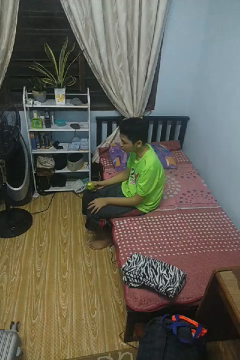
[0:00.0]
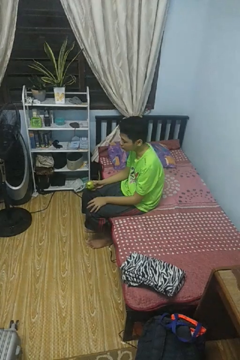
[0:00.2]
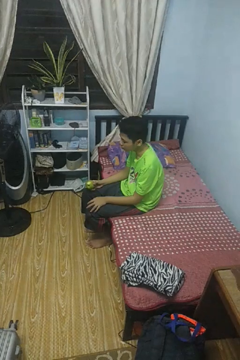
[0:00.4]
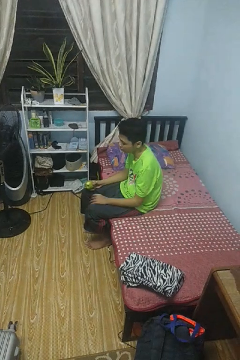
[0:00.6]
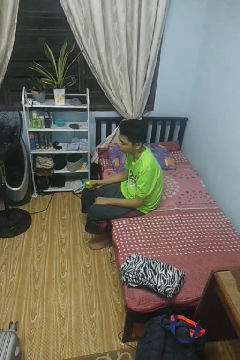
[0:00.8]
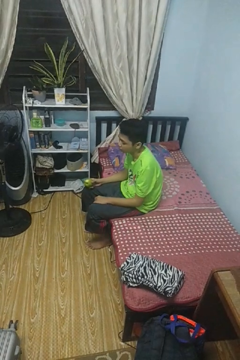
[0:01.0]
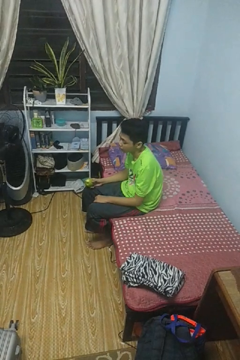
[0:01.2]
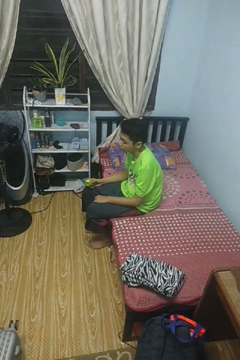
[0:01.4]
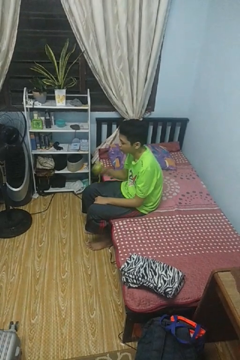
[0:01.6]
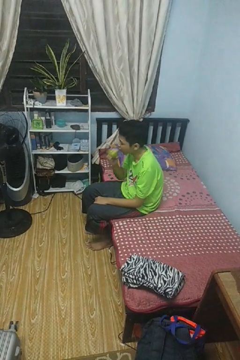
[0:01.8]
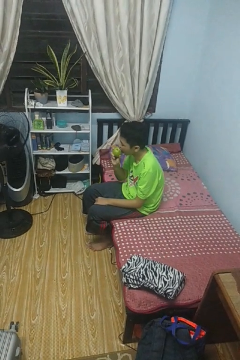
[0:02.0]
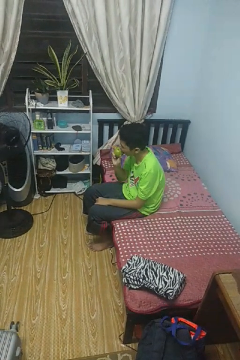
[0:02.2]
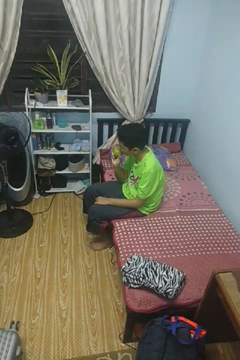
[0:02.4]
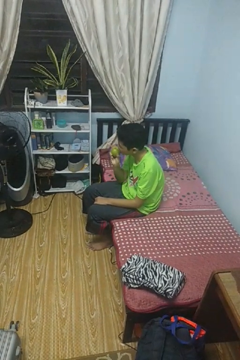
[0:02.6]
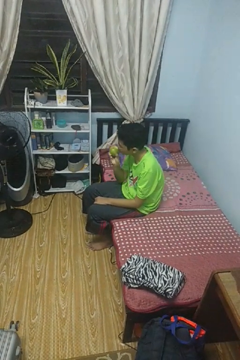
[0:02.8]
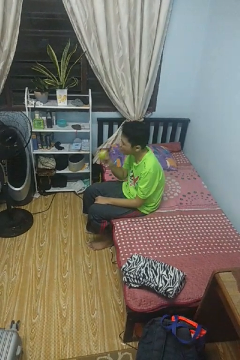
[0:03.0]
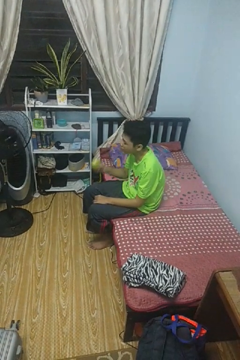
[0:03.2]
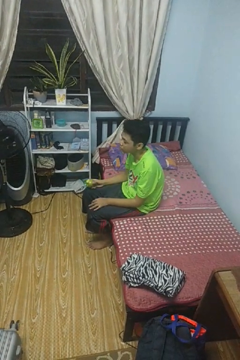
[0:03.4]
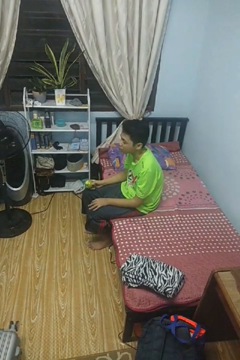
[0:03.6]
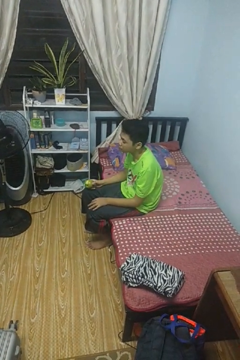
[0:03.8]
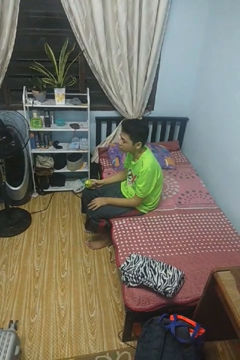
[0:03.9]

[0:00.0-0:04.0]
person eats apple

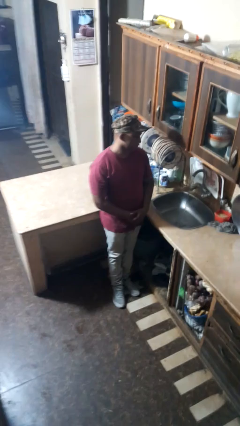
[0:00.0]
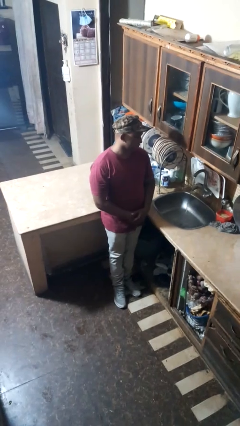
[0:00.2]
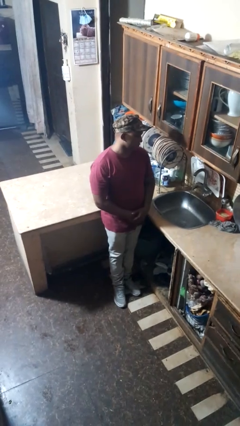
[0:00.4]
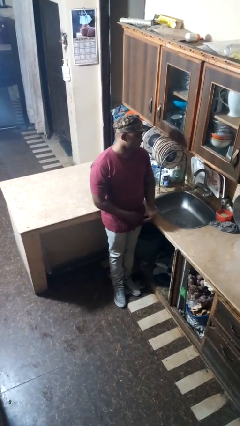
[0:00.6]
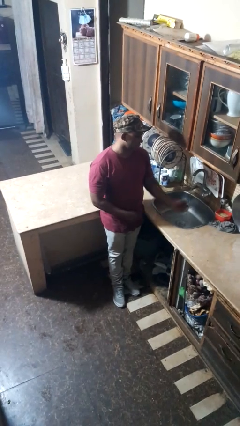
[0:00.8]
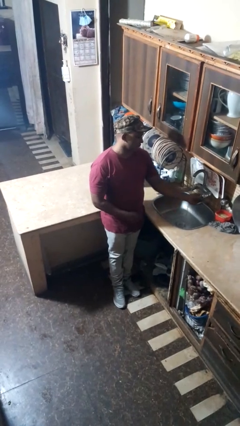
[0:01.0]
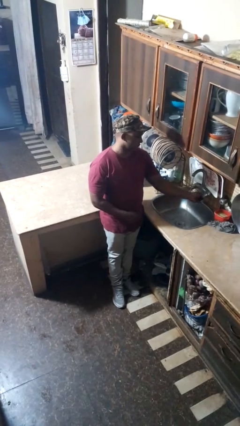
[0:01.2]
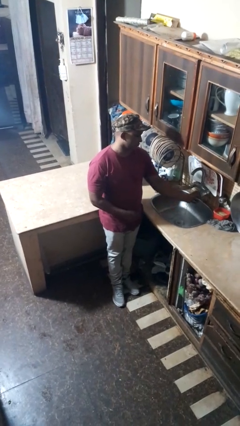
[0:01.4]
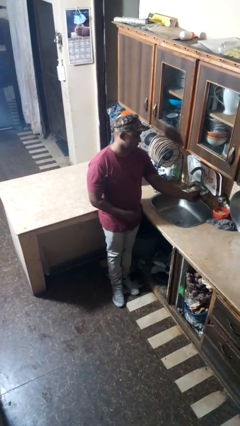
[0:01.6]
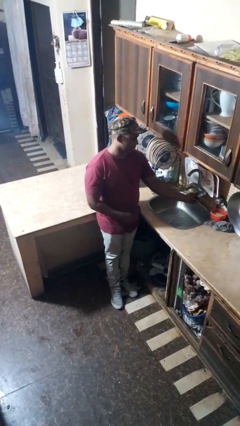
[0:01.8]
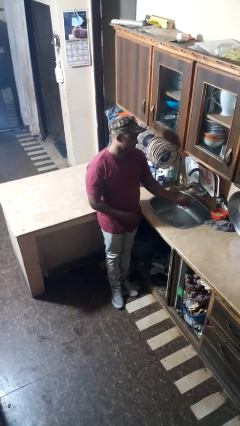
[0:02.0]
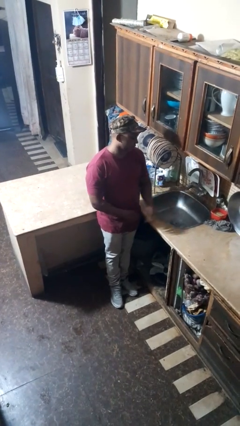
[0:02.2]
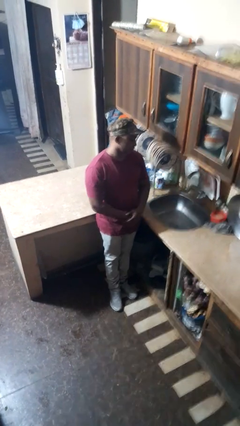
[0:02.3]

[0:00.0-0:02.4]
person turns off faucet

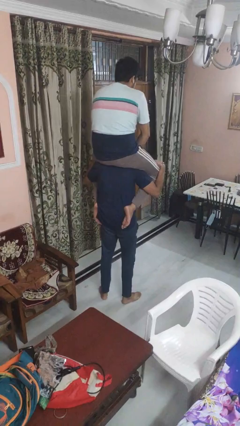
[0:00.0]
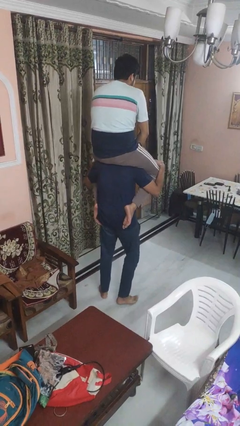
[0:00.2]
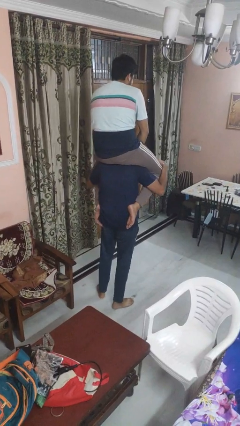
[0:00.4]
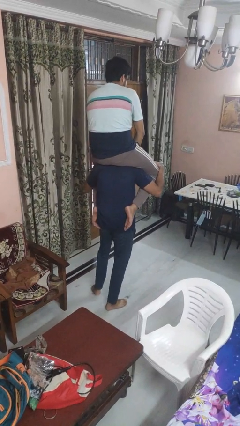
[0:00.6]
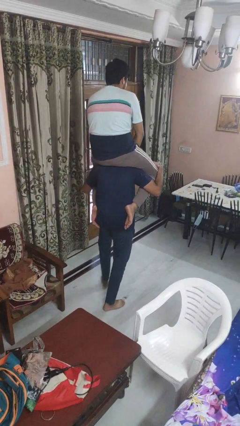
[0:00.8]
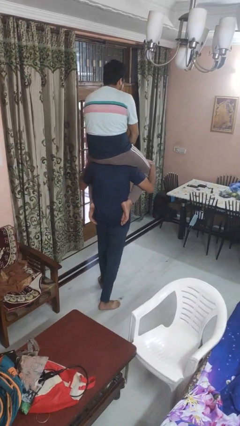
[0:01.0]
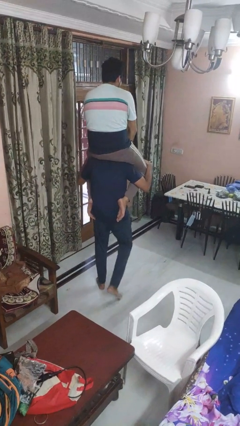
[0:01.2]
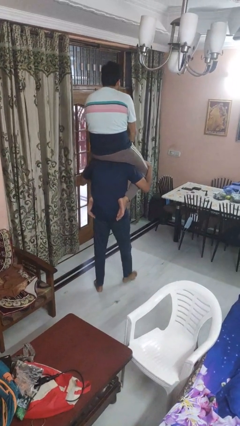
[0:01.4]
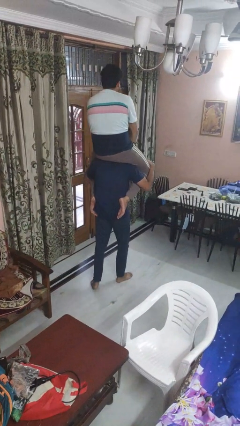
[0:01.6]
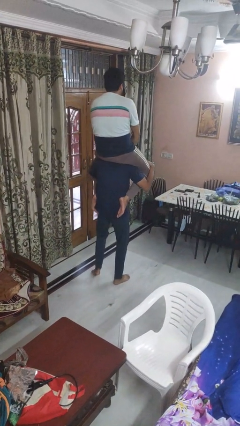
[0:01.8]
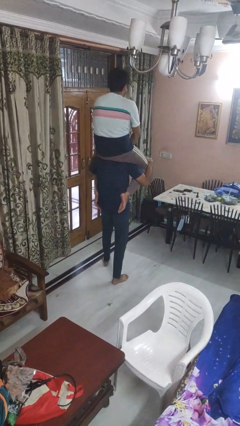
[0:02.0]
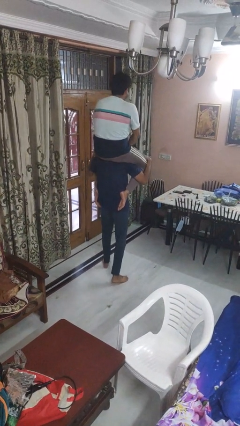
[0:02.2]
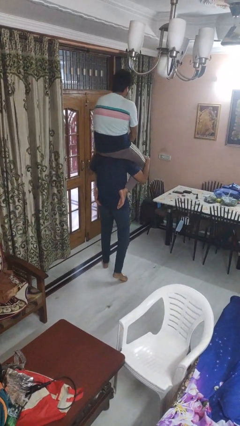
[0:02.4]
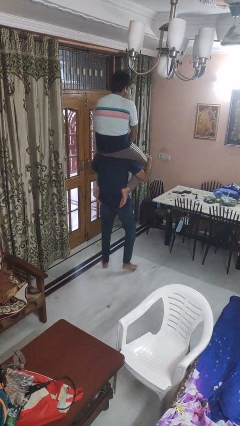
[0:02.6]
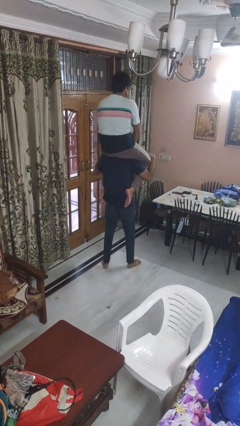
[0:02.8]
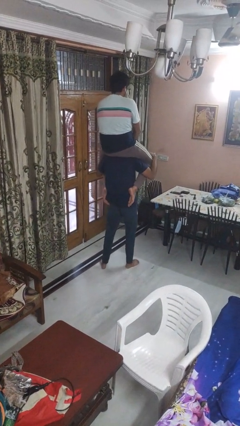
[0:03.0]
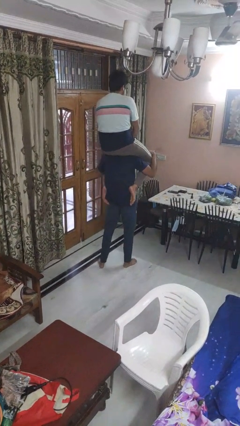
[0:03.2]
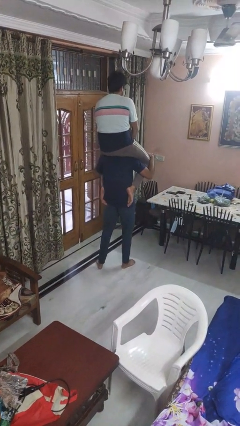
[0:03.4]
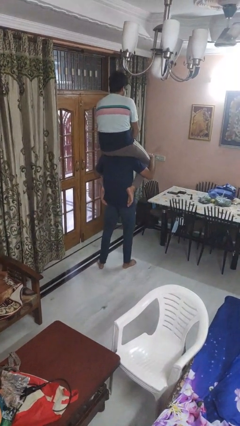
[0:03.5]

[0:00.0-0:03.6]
person carries person on shoulders

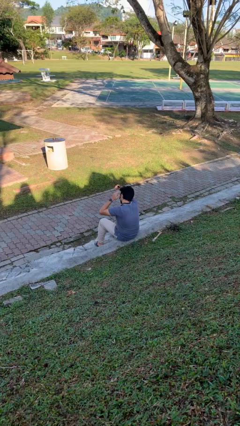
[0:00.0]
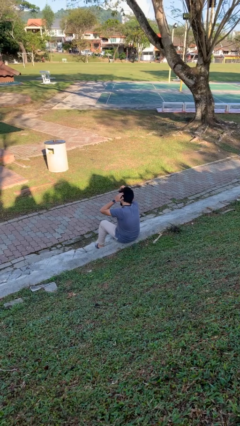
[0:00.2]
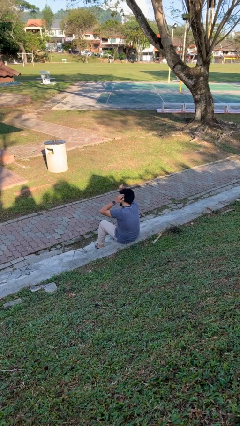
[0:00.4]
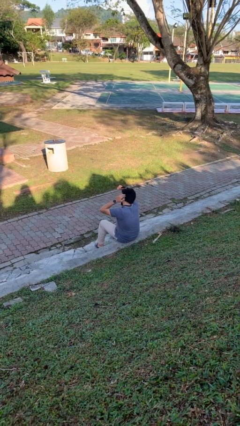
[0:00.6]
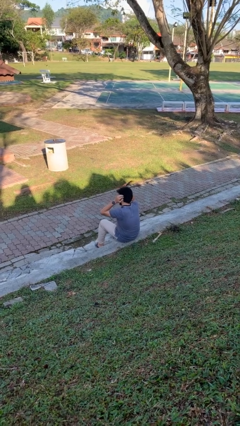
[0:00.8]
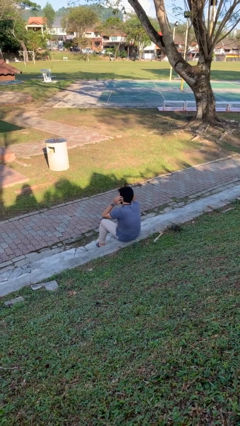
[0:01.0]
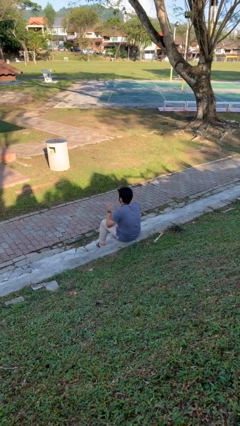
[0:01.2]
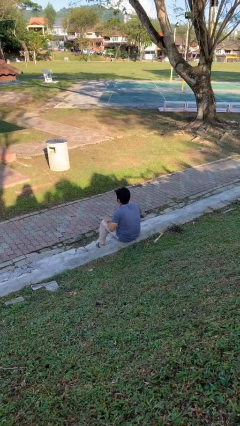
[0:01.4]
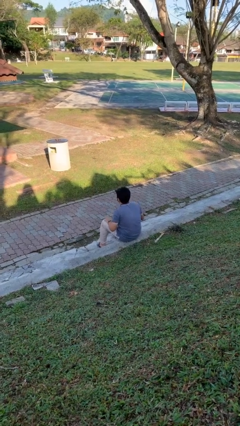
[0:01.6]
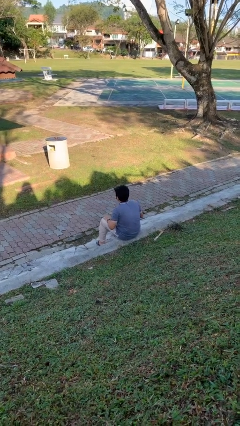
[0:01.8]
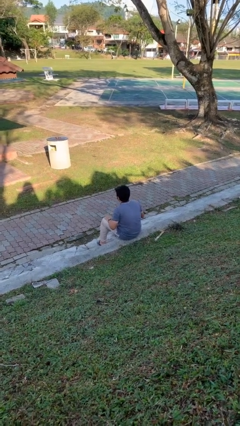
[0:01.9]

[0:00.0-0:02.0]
person brushes hair

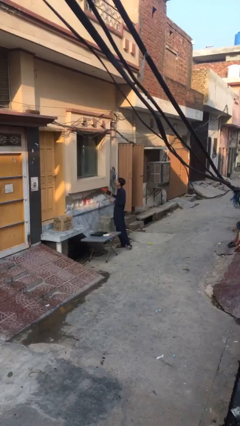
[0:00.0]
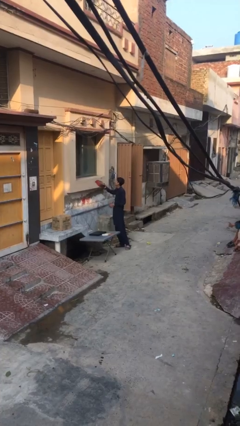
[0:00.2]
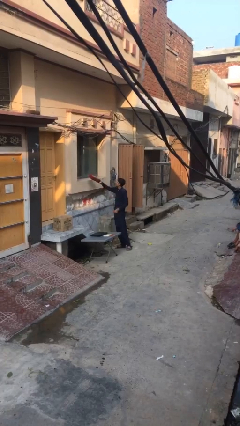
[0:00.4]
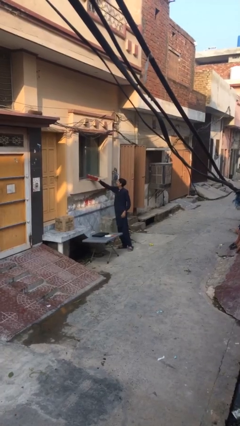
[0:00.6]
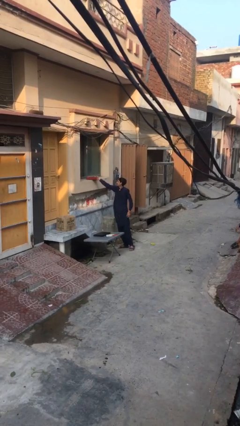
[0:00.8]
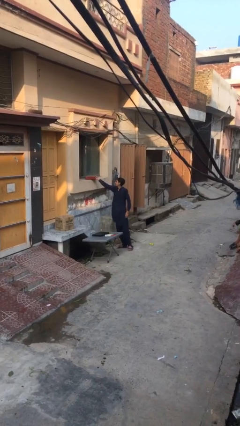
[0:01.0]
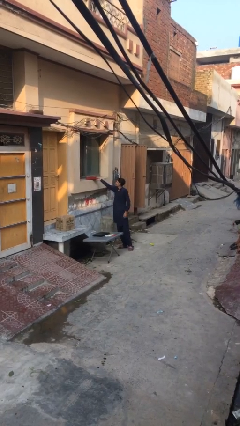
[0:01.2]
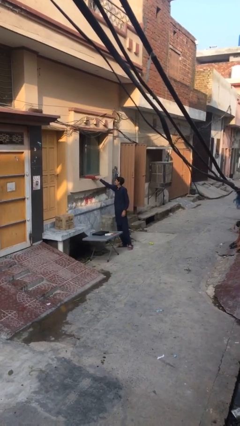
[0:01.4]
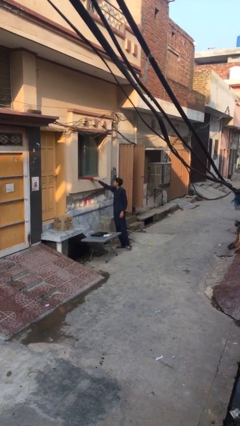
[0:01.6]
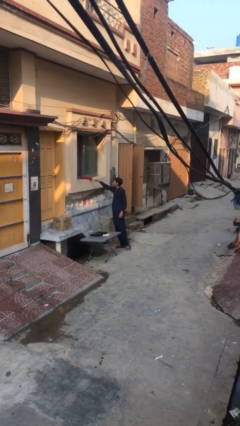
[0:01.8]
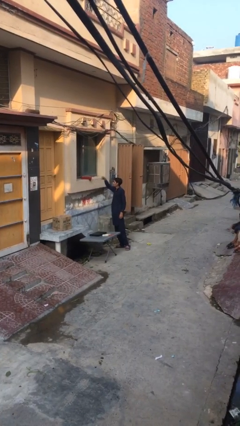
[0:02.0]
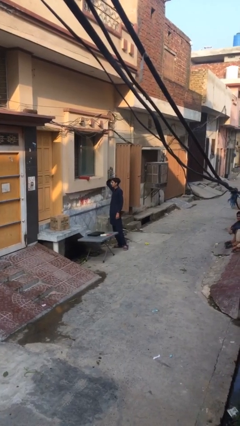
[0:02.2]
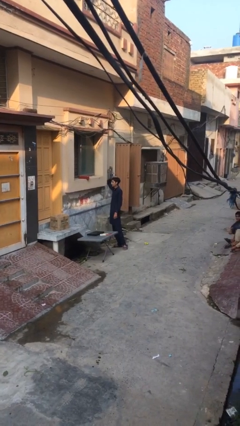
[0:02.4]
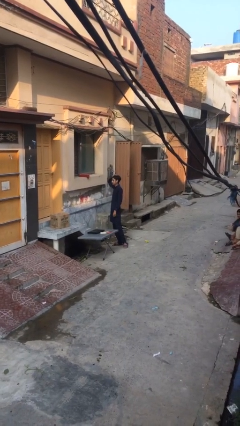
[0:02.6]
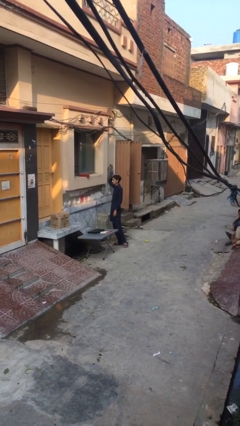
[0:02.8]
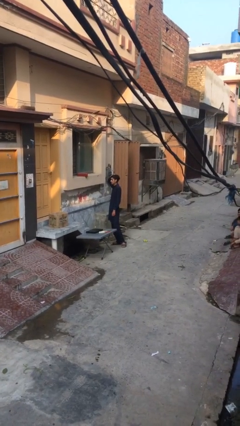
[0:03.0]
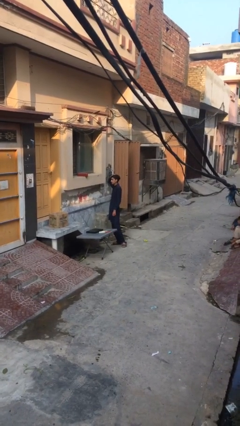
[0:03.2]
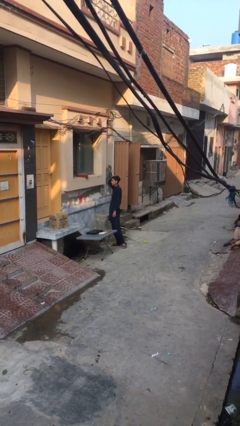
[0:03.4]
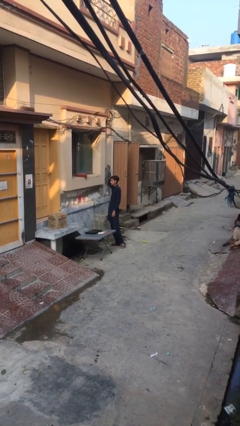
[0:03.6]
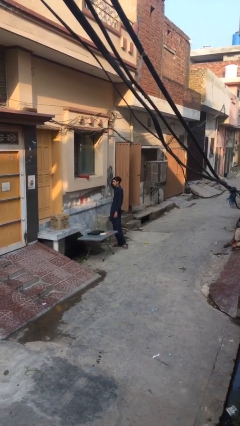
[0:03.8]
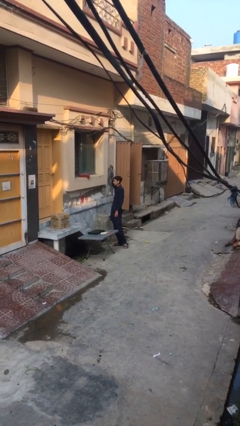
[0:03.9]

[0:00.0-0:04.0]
person puts down object on shelf

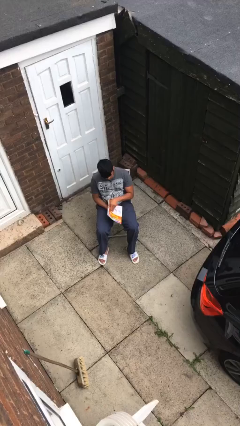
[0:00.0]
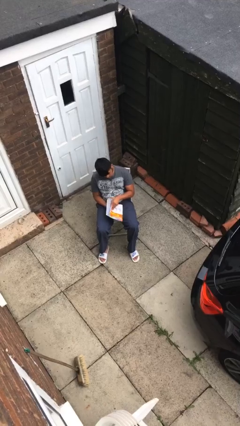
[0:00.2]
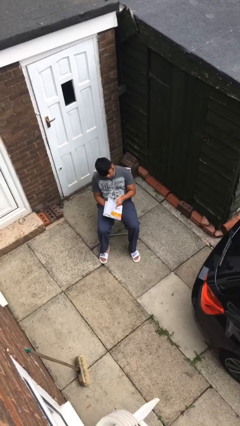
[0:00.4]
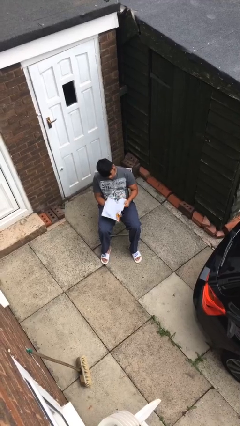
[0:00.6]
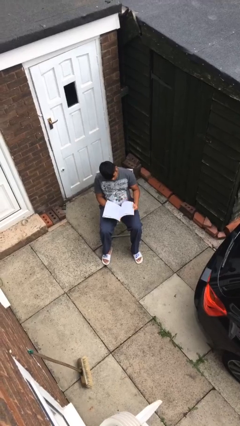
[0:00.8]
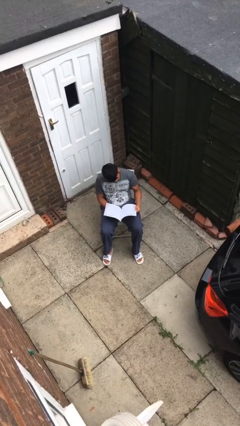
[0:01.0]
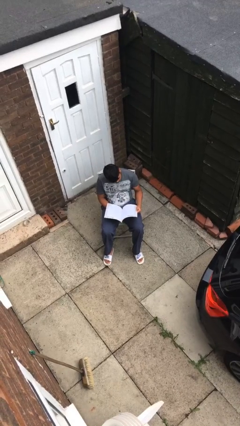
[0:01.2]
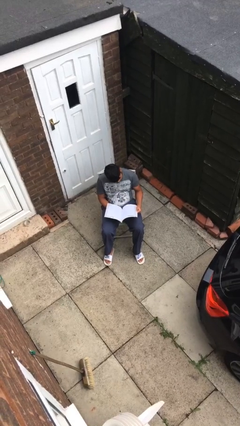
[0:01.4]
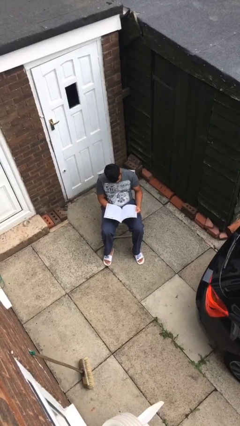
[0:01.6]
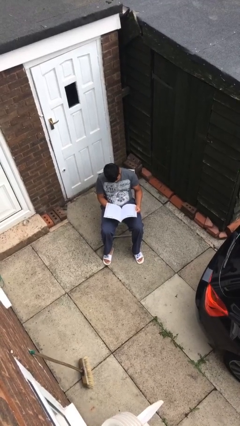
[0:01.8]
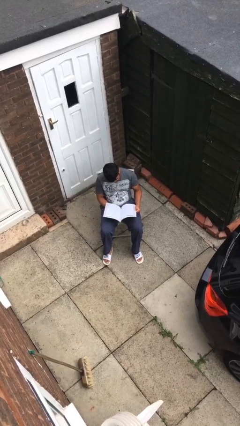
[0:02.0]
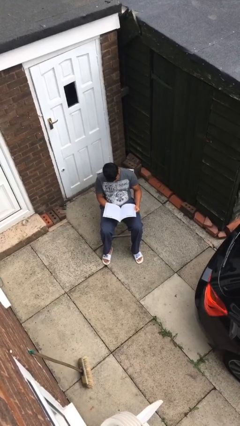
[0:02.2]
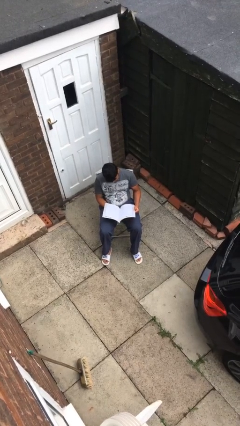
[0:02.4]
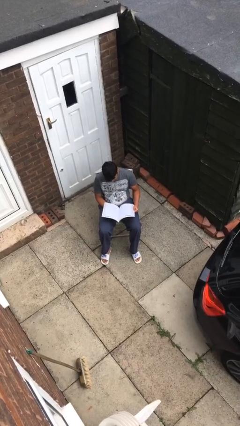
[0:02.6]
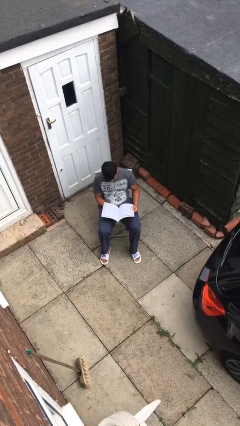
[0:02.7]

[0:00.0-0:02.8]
person reads magazine
